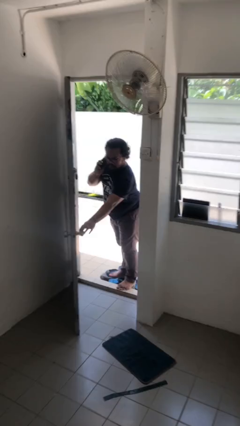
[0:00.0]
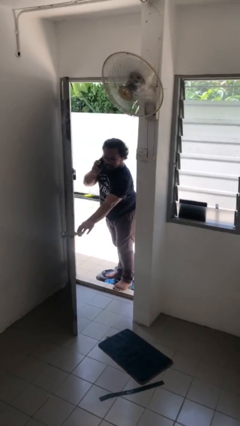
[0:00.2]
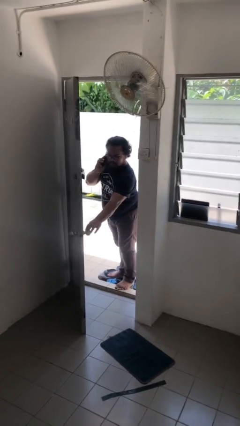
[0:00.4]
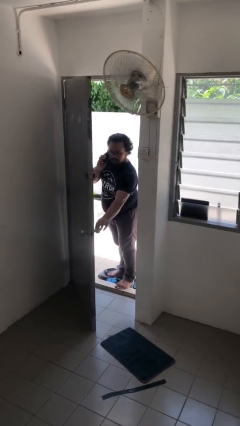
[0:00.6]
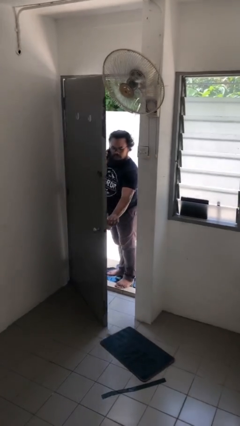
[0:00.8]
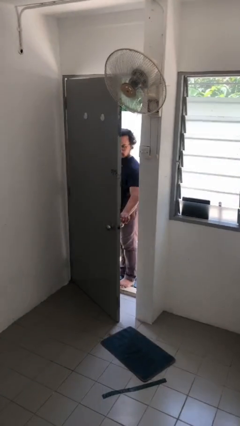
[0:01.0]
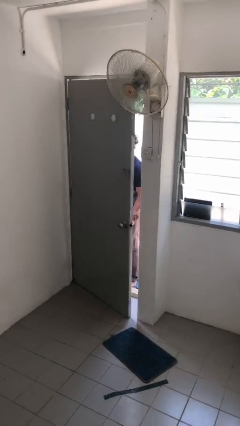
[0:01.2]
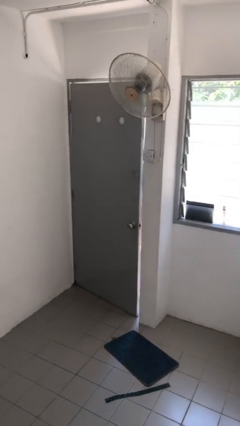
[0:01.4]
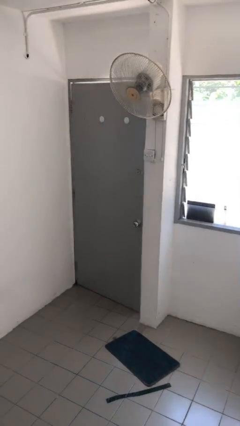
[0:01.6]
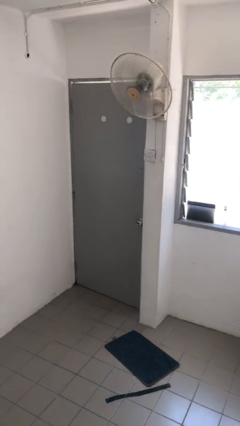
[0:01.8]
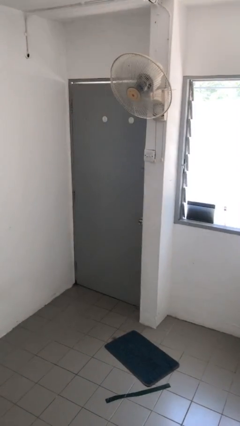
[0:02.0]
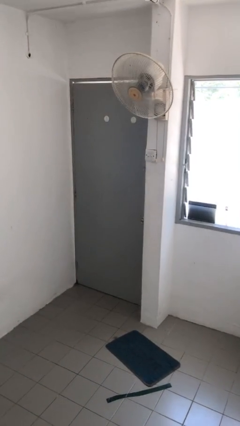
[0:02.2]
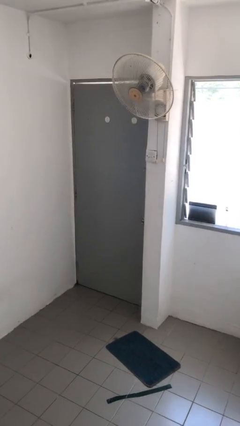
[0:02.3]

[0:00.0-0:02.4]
person closes facility door

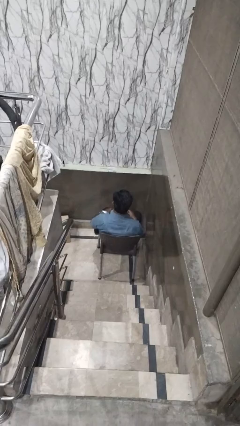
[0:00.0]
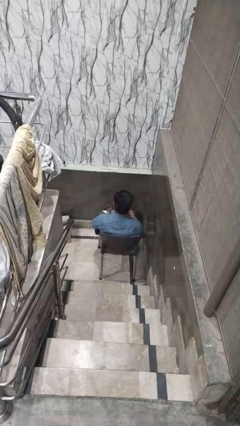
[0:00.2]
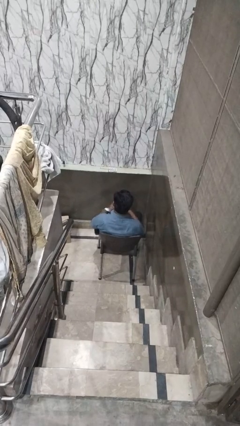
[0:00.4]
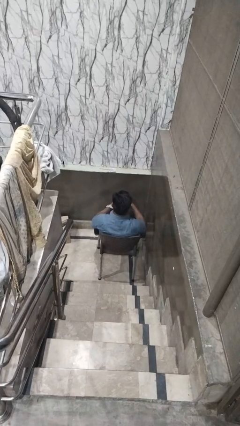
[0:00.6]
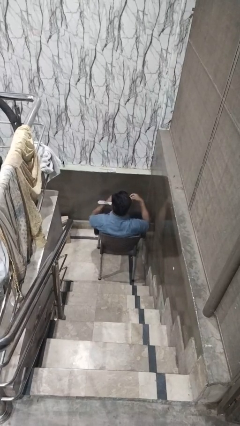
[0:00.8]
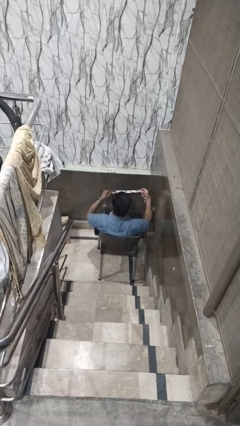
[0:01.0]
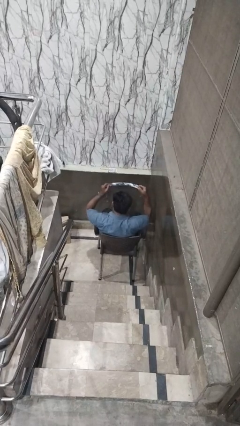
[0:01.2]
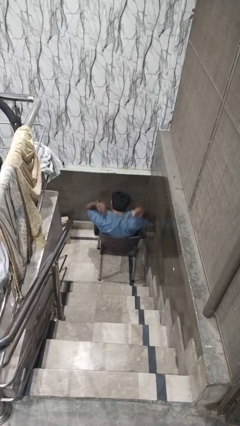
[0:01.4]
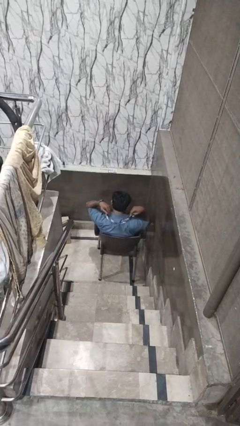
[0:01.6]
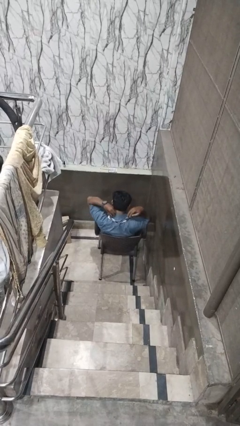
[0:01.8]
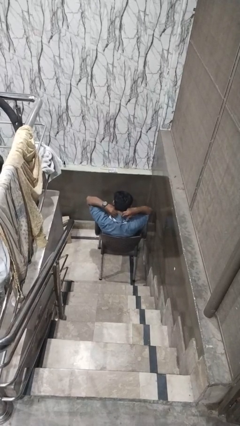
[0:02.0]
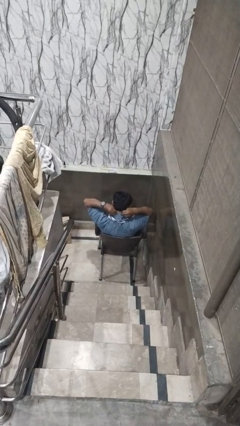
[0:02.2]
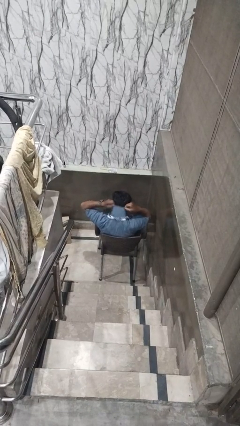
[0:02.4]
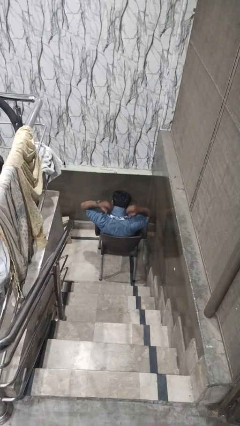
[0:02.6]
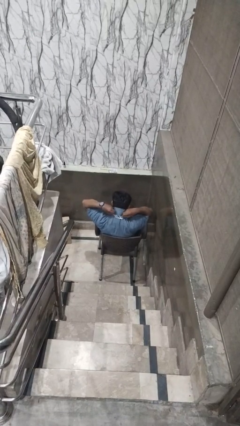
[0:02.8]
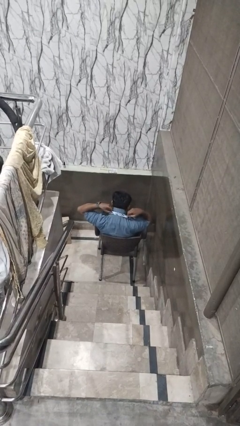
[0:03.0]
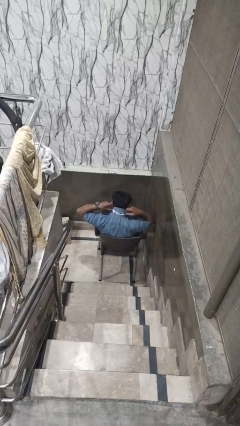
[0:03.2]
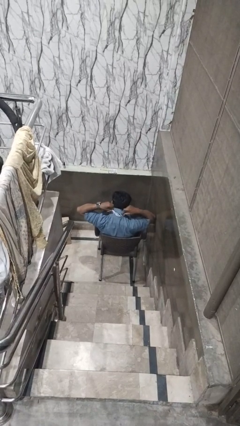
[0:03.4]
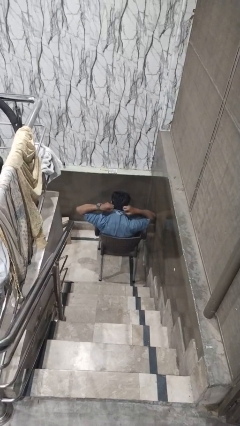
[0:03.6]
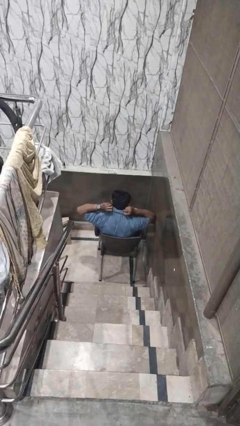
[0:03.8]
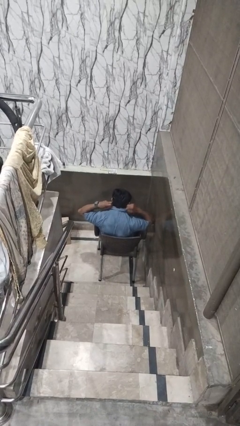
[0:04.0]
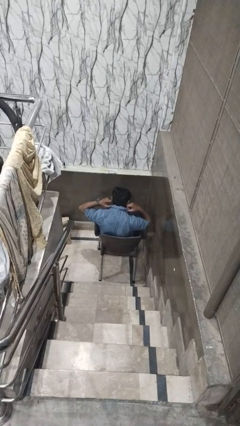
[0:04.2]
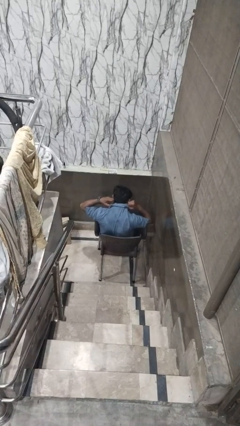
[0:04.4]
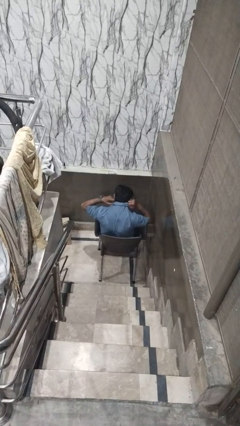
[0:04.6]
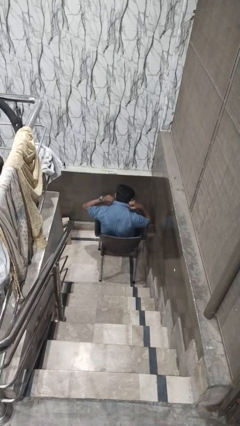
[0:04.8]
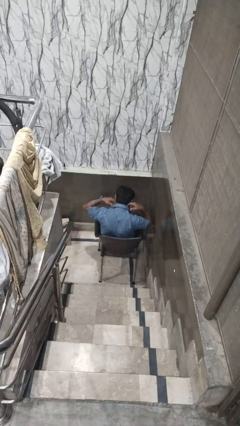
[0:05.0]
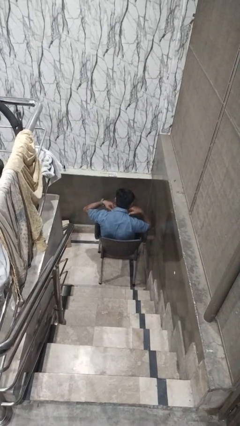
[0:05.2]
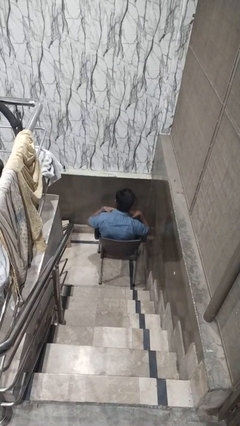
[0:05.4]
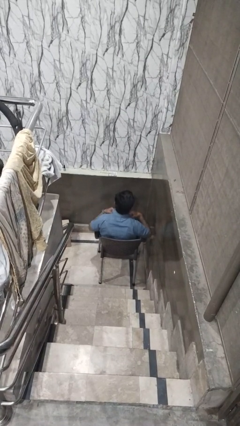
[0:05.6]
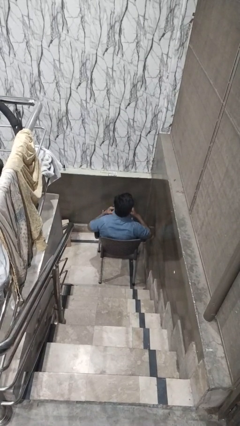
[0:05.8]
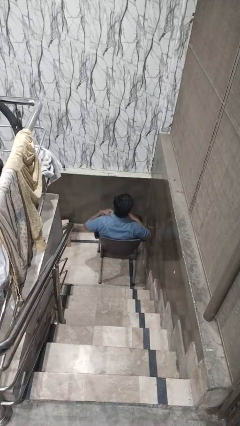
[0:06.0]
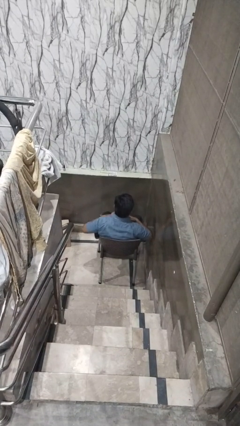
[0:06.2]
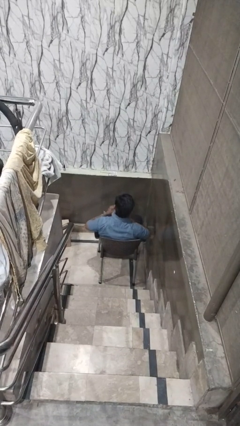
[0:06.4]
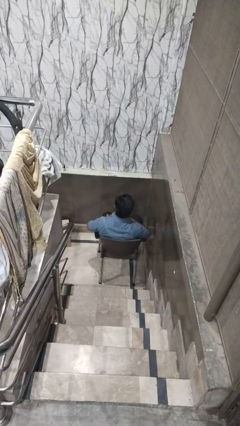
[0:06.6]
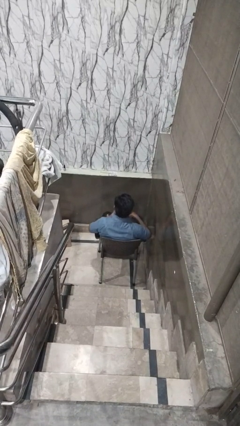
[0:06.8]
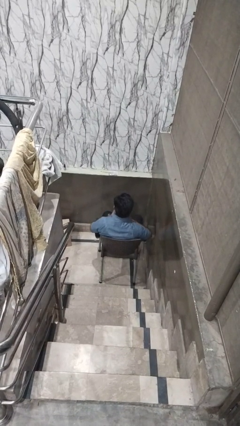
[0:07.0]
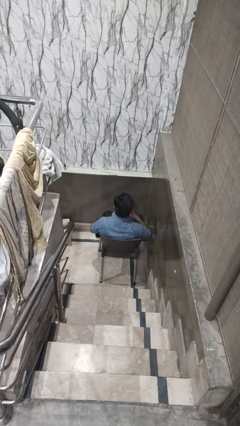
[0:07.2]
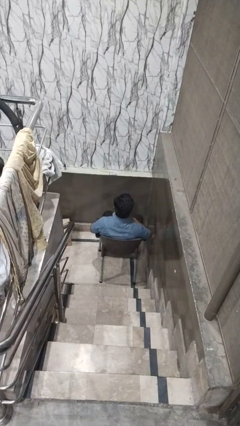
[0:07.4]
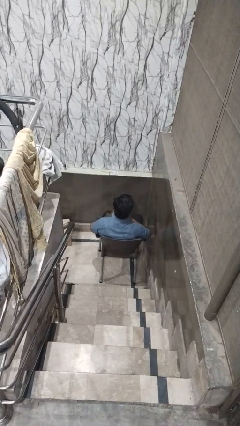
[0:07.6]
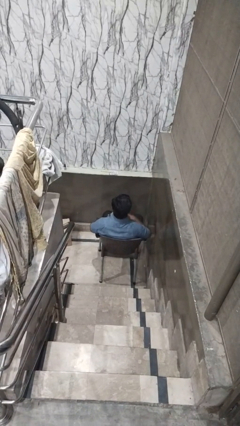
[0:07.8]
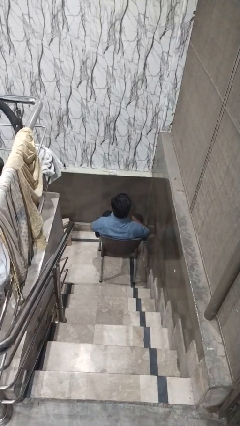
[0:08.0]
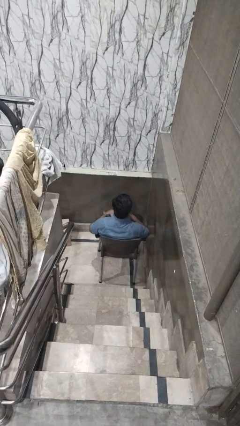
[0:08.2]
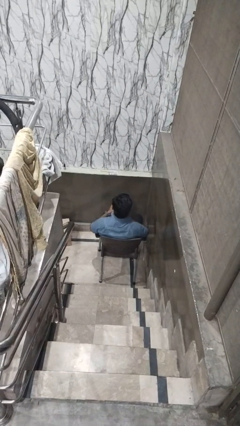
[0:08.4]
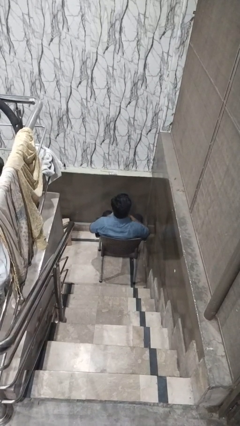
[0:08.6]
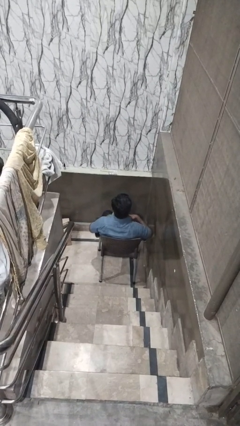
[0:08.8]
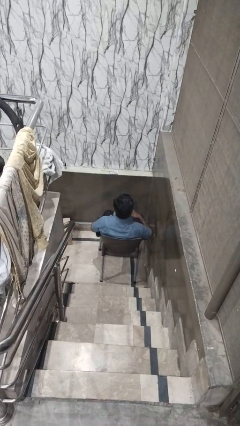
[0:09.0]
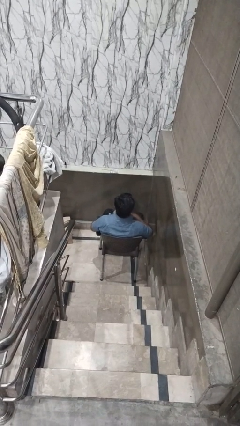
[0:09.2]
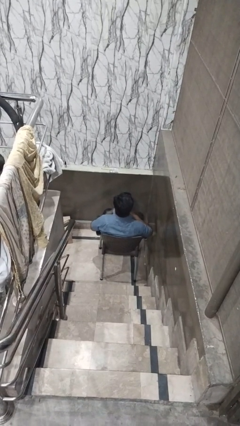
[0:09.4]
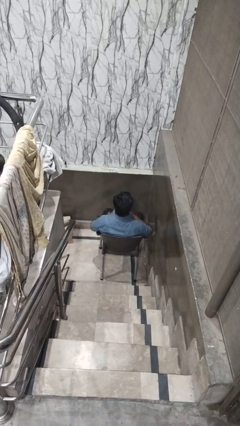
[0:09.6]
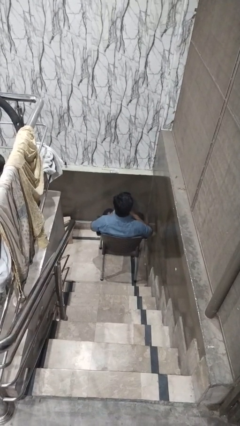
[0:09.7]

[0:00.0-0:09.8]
person puts on necktie

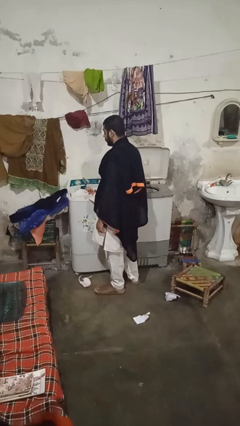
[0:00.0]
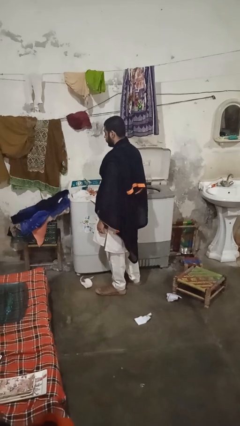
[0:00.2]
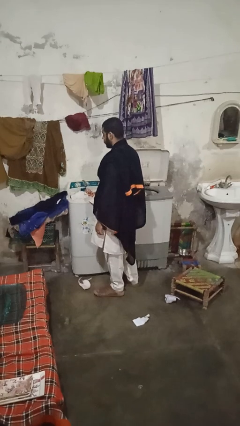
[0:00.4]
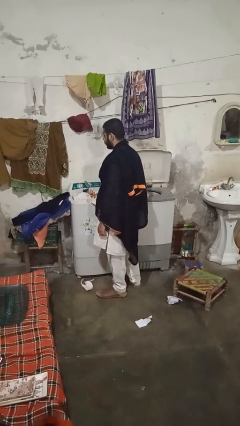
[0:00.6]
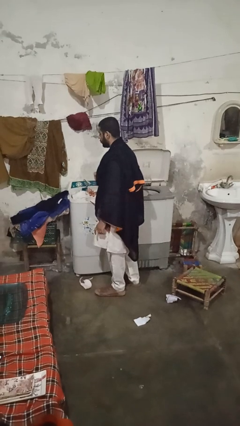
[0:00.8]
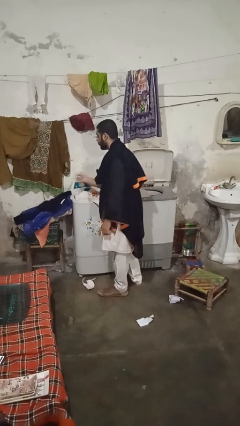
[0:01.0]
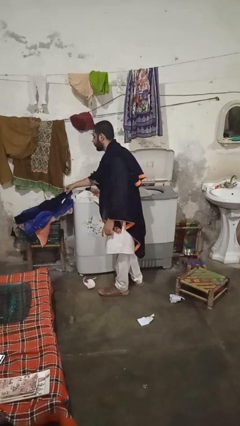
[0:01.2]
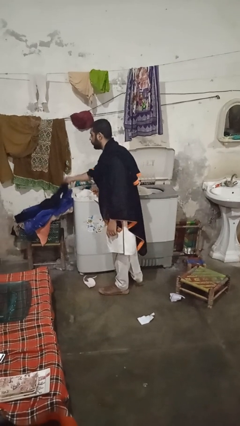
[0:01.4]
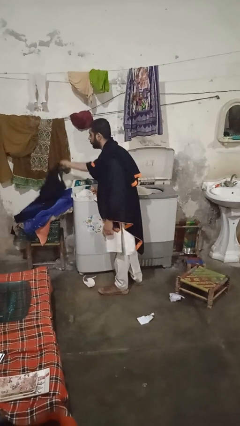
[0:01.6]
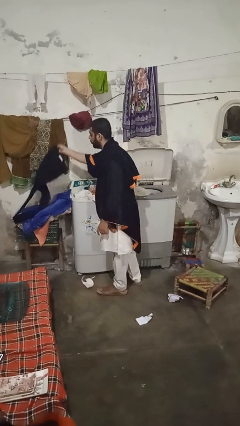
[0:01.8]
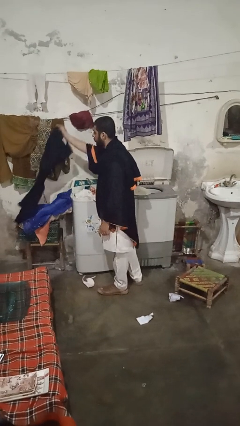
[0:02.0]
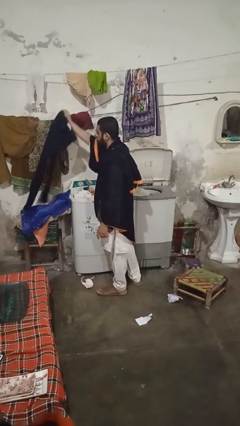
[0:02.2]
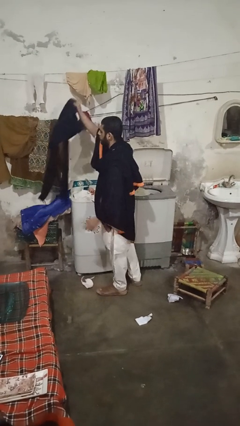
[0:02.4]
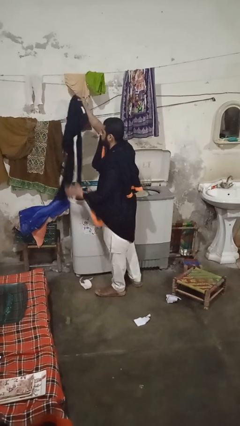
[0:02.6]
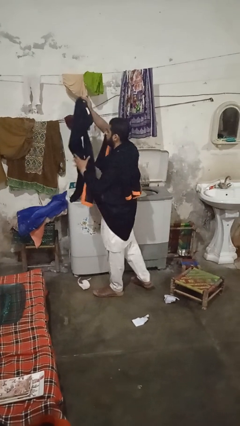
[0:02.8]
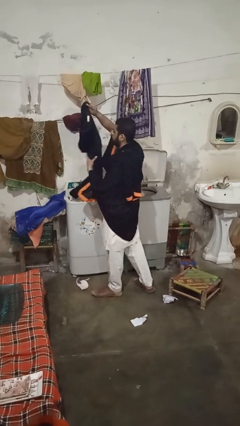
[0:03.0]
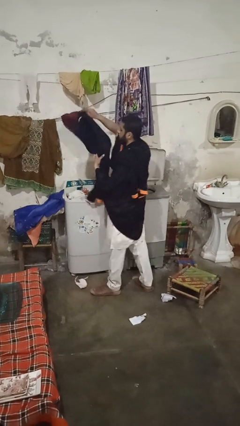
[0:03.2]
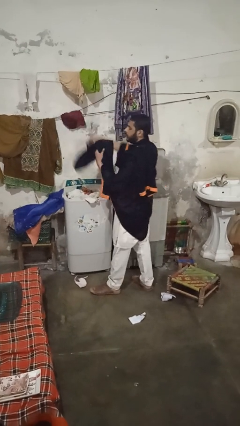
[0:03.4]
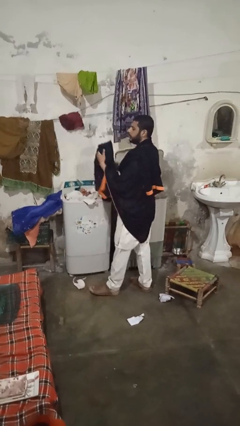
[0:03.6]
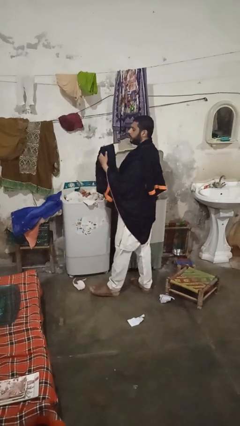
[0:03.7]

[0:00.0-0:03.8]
person loads clotheswasher

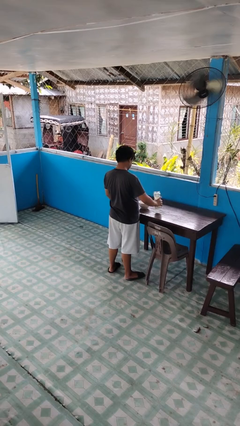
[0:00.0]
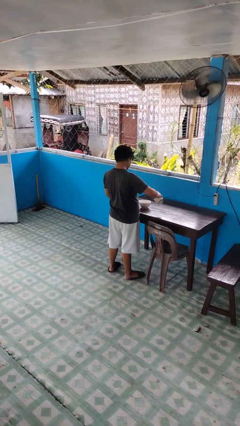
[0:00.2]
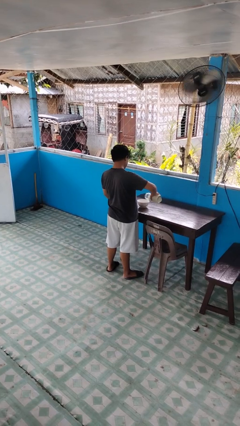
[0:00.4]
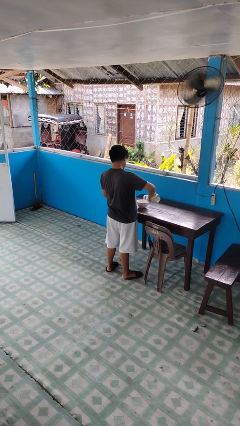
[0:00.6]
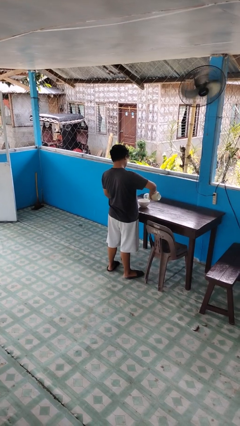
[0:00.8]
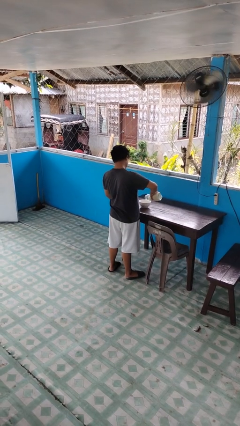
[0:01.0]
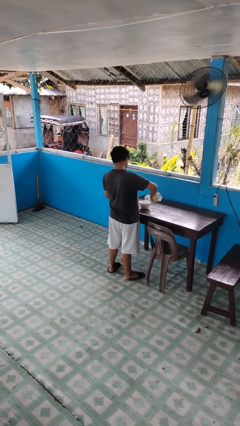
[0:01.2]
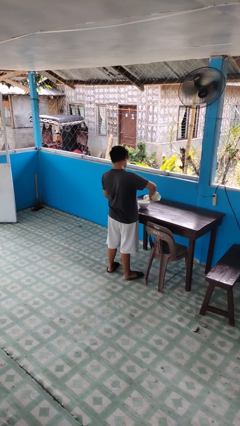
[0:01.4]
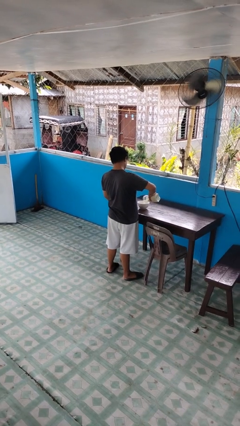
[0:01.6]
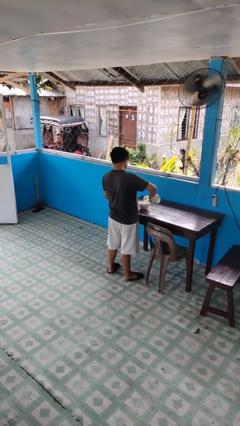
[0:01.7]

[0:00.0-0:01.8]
person pours into bowl
